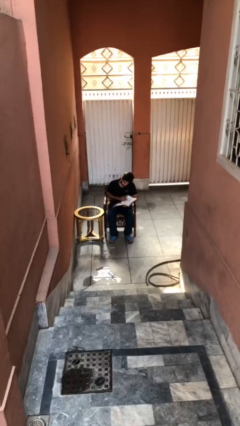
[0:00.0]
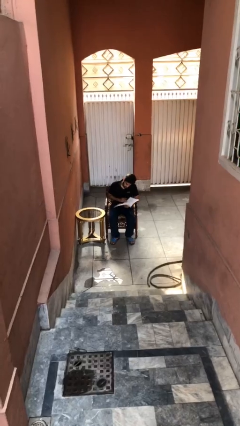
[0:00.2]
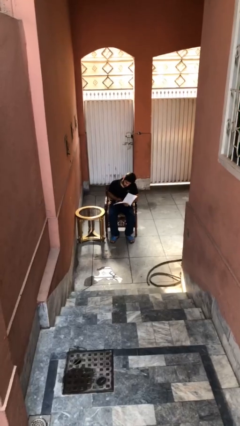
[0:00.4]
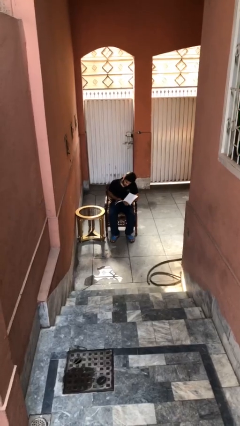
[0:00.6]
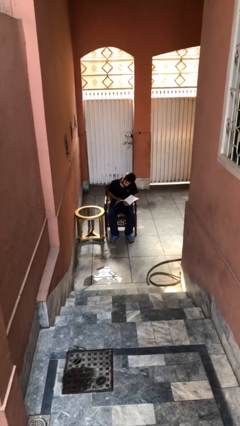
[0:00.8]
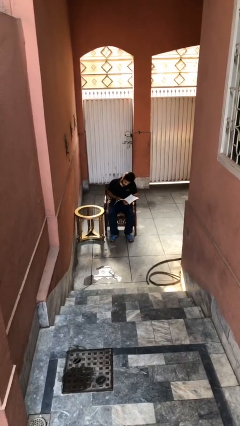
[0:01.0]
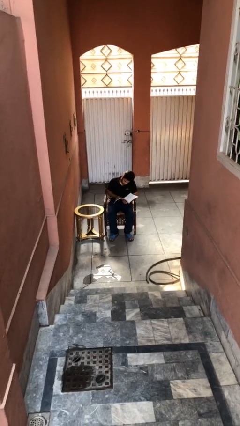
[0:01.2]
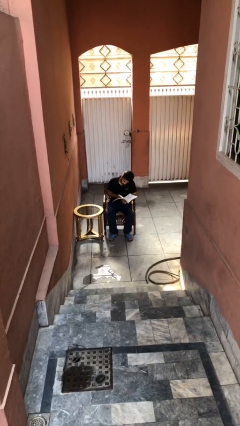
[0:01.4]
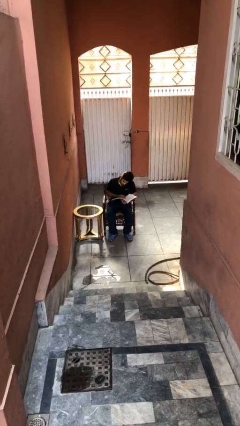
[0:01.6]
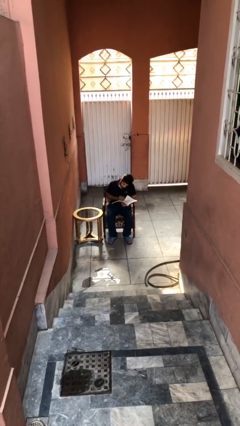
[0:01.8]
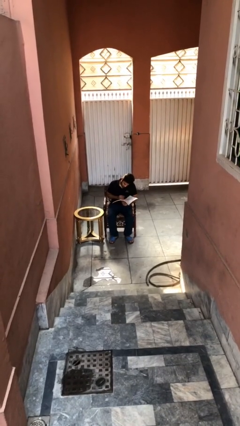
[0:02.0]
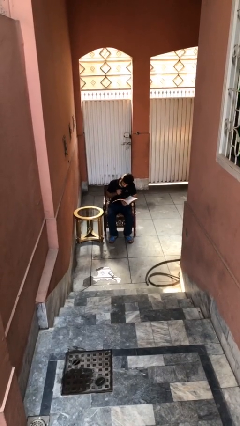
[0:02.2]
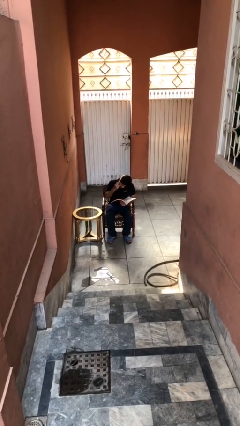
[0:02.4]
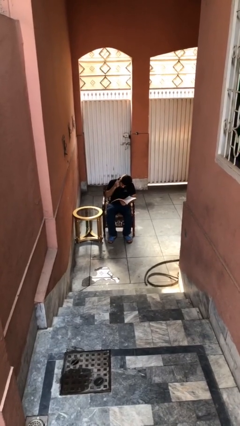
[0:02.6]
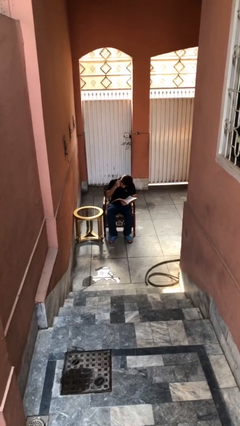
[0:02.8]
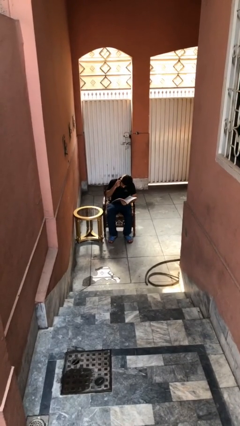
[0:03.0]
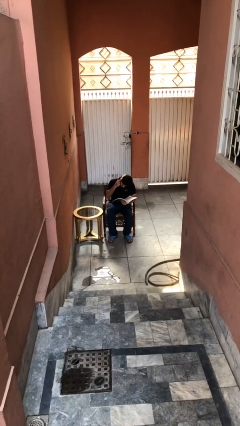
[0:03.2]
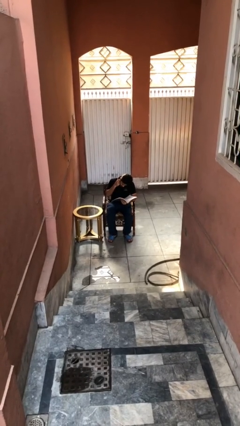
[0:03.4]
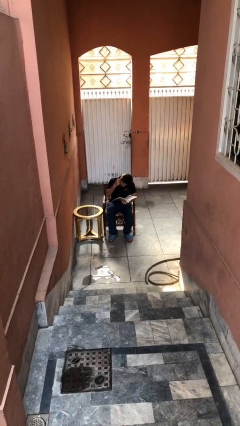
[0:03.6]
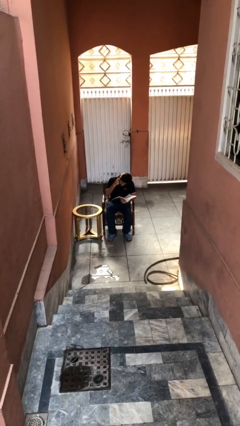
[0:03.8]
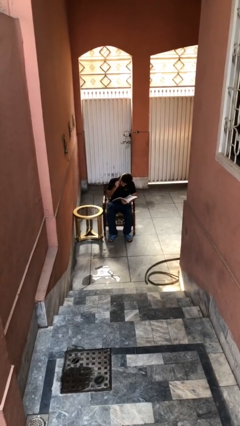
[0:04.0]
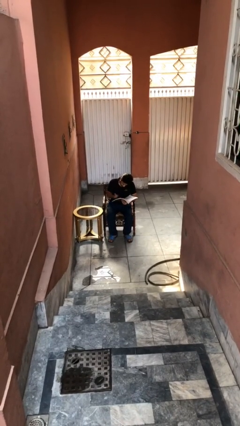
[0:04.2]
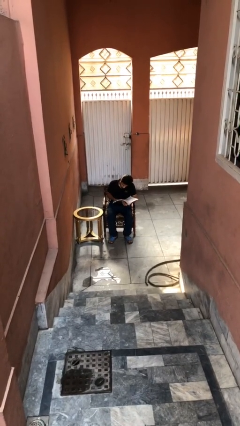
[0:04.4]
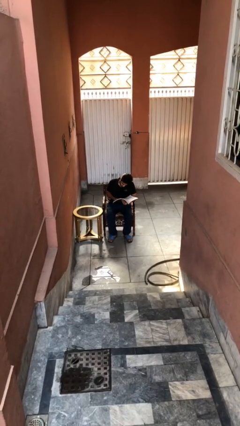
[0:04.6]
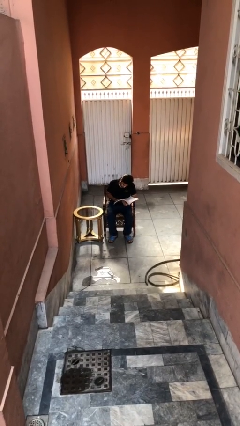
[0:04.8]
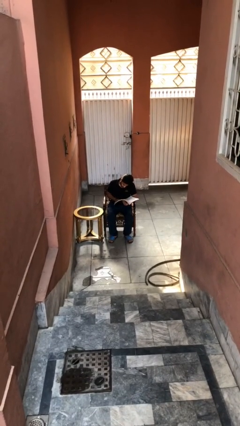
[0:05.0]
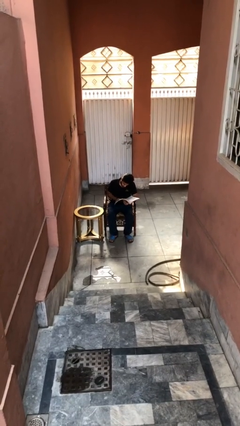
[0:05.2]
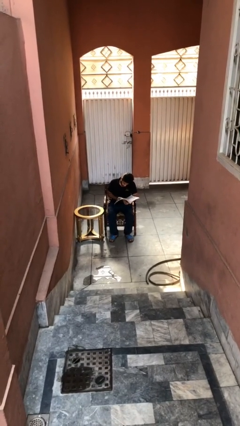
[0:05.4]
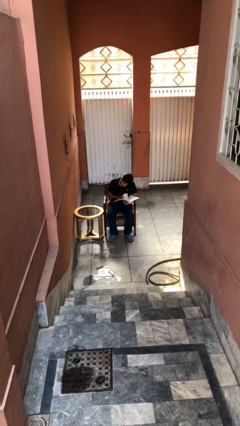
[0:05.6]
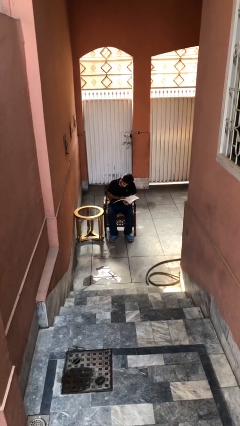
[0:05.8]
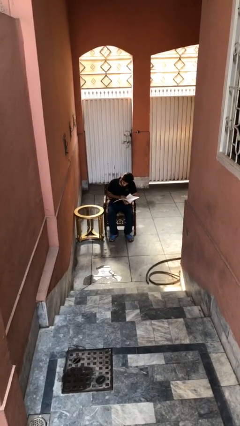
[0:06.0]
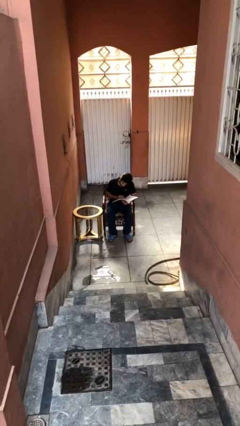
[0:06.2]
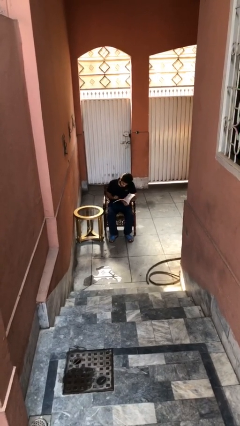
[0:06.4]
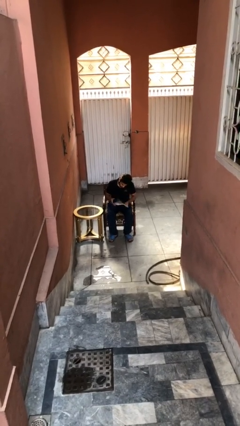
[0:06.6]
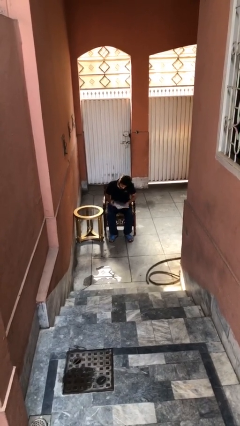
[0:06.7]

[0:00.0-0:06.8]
person reads document

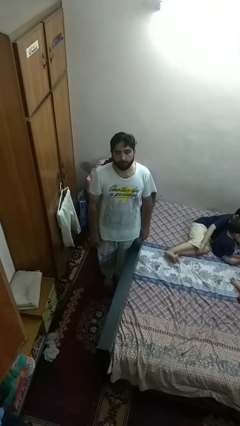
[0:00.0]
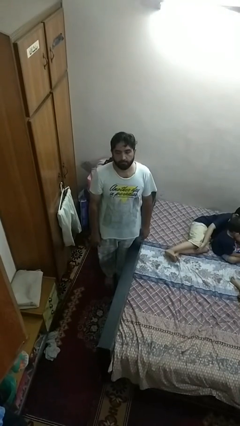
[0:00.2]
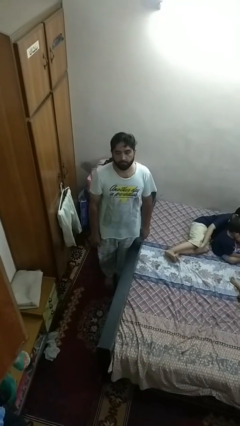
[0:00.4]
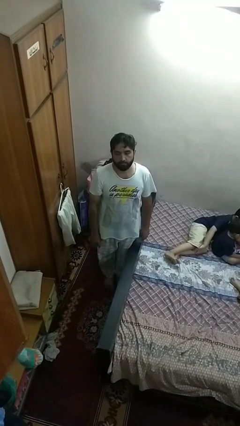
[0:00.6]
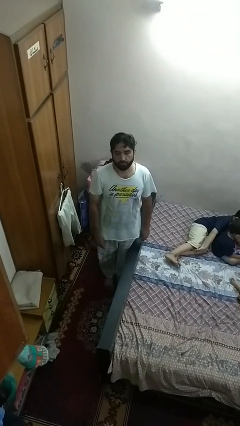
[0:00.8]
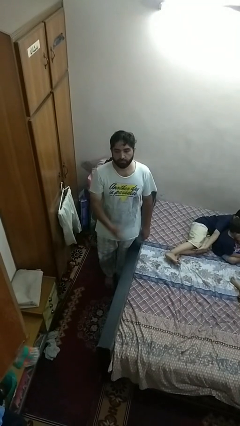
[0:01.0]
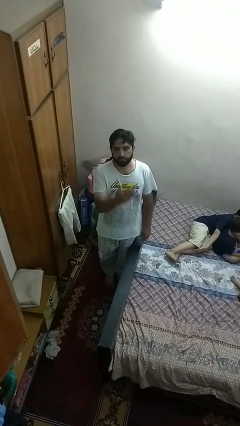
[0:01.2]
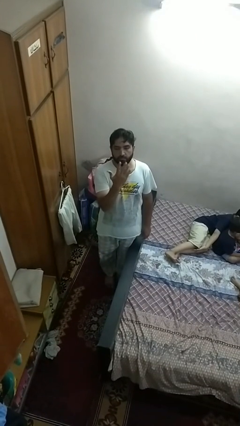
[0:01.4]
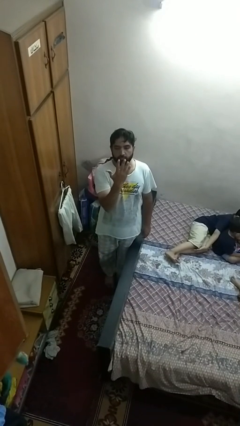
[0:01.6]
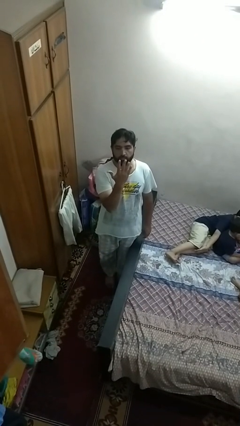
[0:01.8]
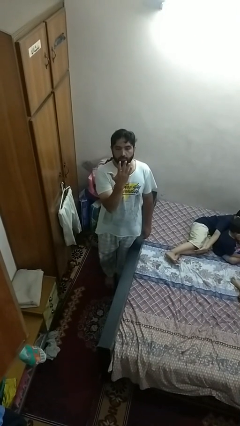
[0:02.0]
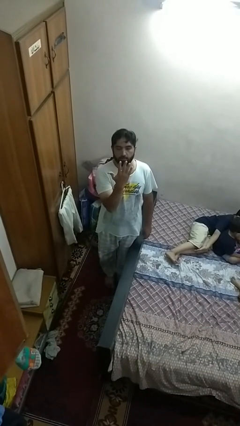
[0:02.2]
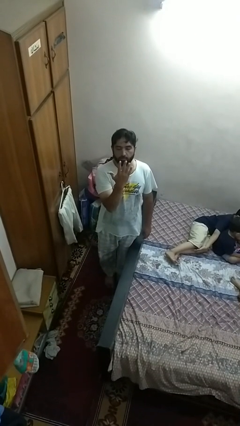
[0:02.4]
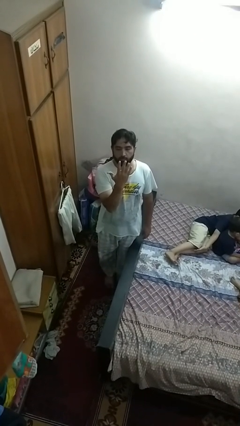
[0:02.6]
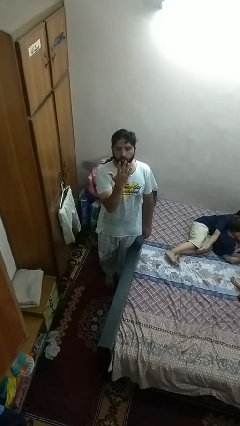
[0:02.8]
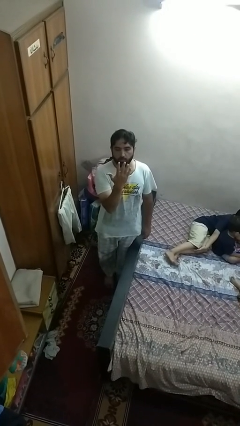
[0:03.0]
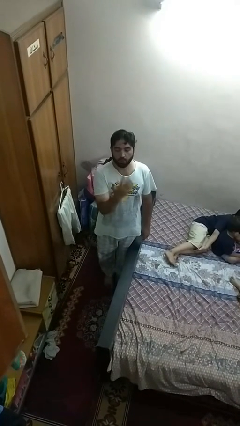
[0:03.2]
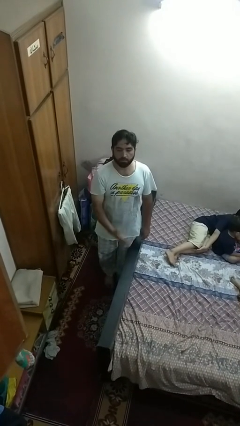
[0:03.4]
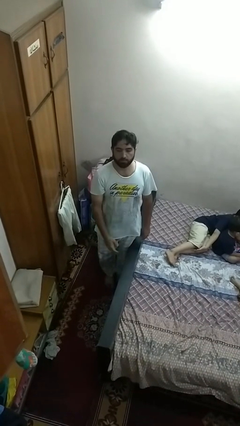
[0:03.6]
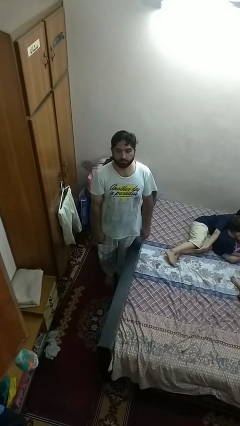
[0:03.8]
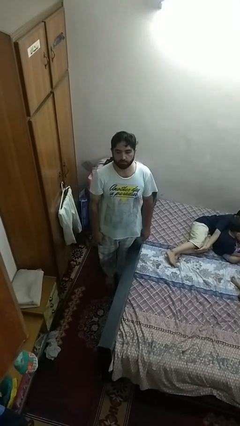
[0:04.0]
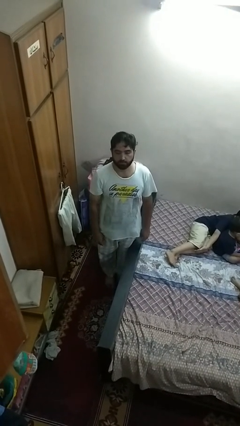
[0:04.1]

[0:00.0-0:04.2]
person gestures number five

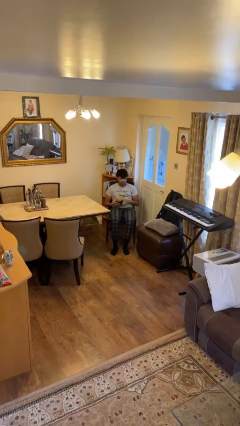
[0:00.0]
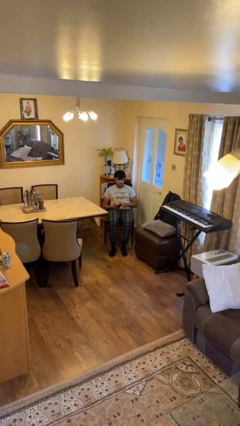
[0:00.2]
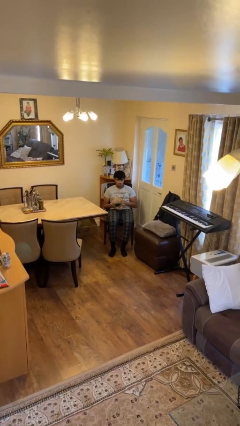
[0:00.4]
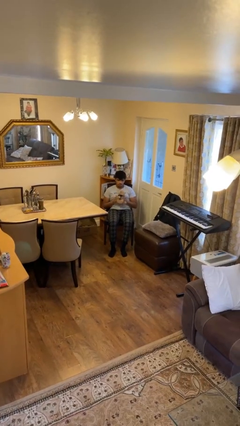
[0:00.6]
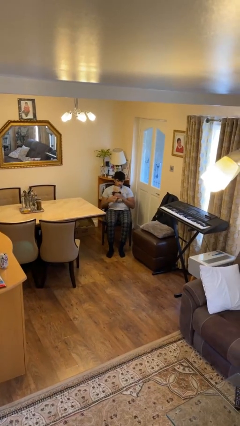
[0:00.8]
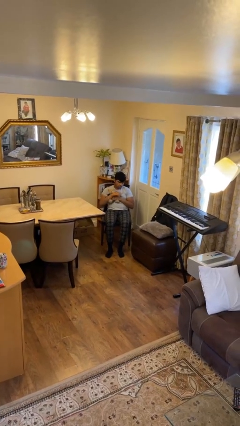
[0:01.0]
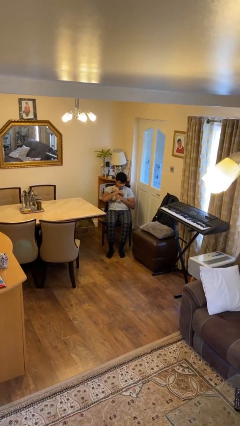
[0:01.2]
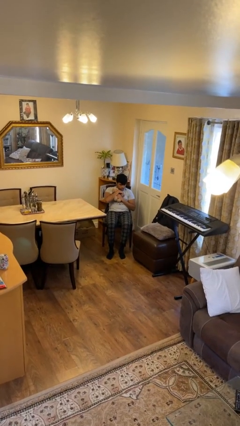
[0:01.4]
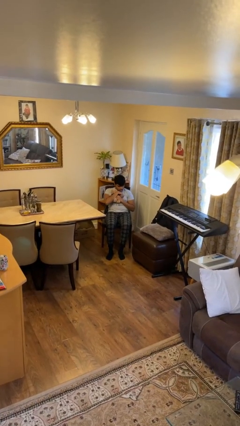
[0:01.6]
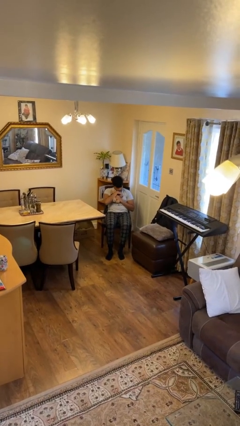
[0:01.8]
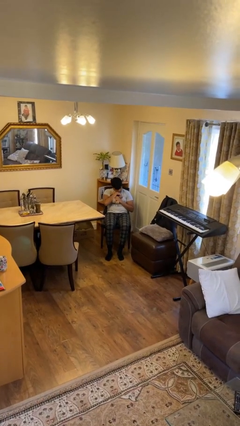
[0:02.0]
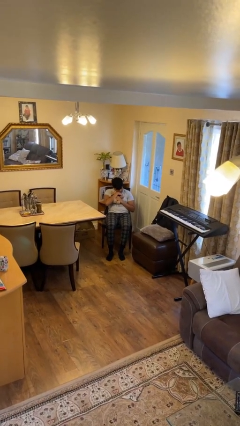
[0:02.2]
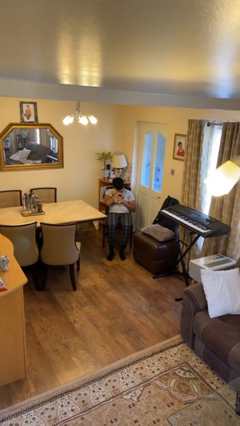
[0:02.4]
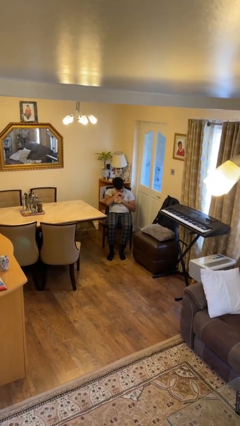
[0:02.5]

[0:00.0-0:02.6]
person hugs stuffed animal

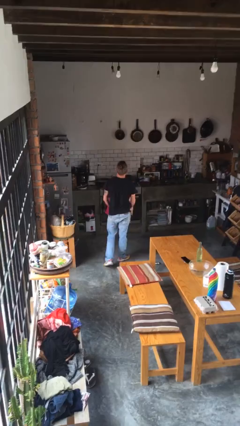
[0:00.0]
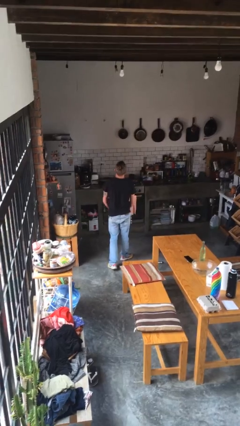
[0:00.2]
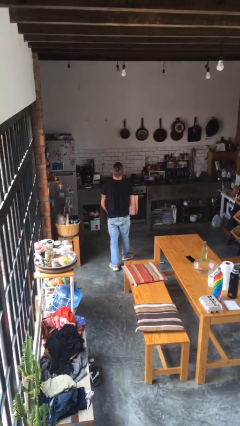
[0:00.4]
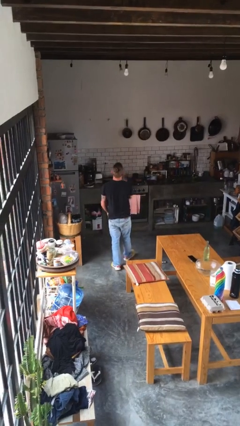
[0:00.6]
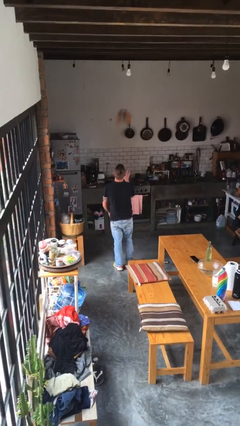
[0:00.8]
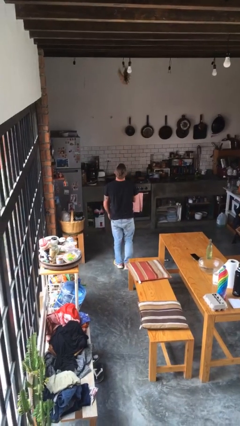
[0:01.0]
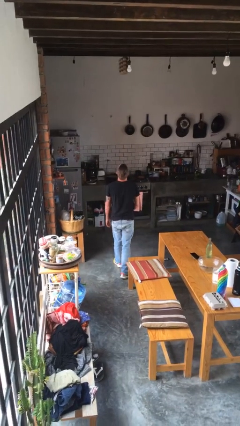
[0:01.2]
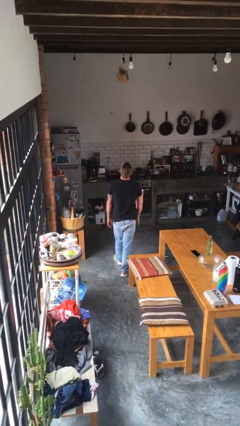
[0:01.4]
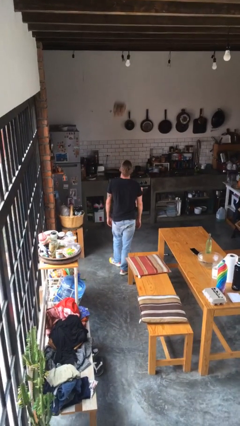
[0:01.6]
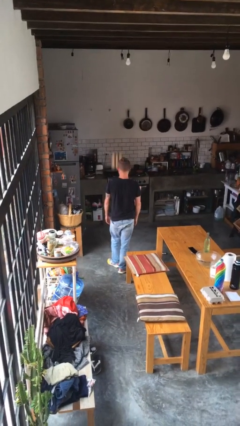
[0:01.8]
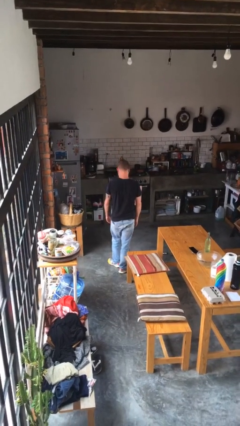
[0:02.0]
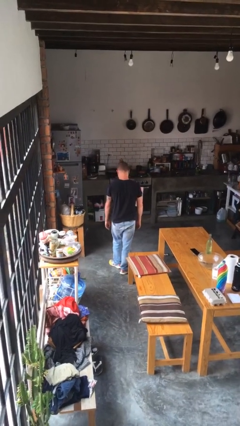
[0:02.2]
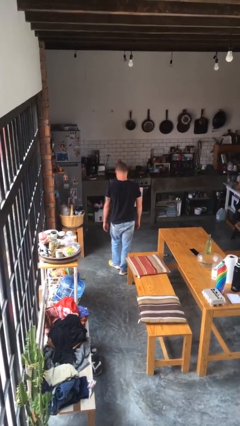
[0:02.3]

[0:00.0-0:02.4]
person throws object into air

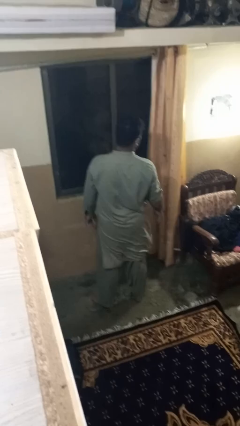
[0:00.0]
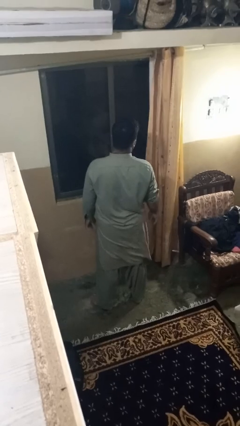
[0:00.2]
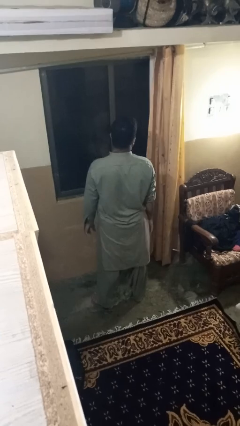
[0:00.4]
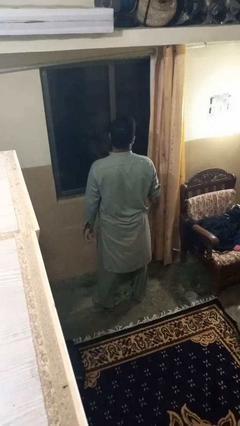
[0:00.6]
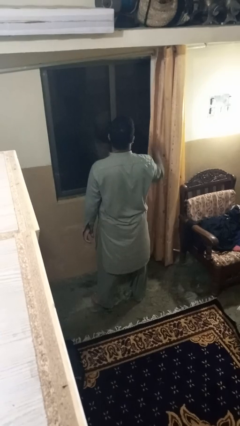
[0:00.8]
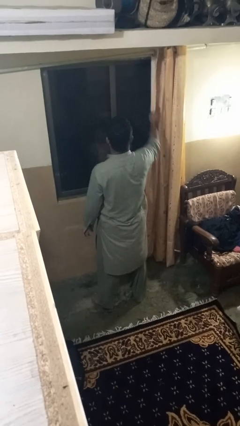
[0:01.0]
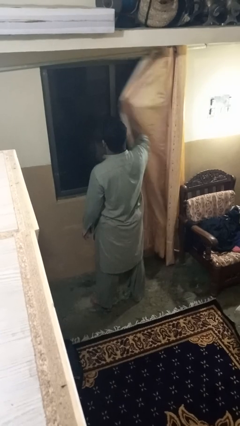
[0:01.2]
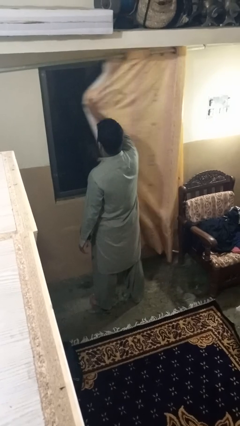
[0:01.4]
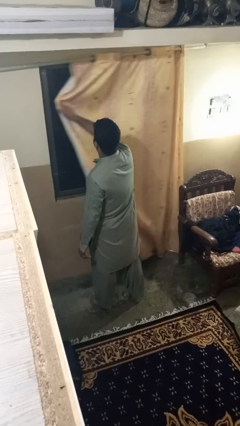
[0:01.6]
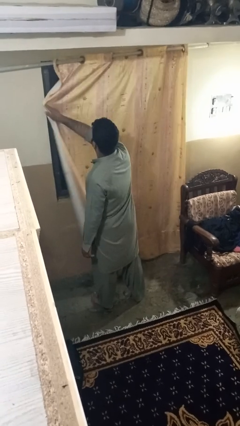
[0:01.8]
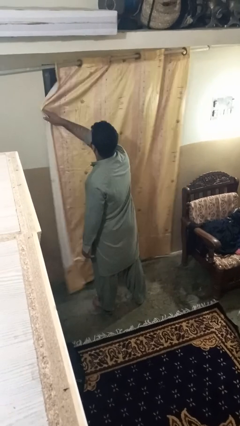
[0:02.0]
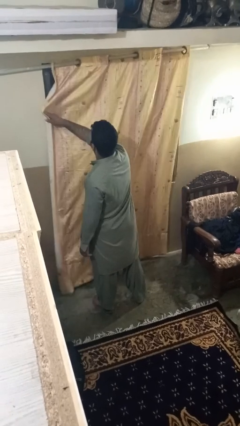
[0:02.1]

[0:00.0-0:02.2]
person closes curtains
